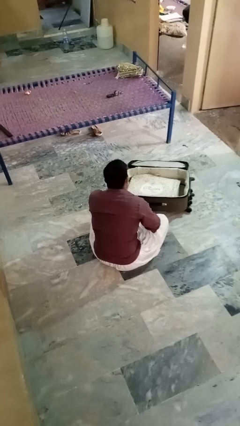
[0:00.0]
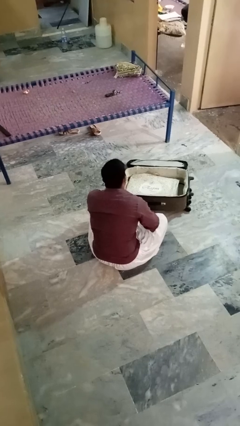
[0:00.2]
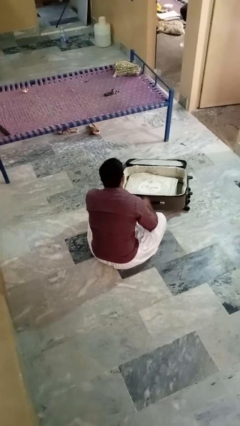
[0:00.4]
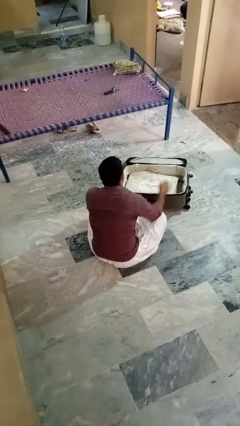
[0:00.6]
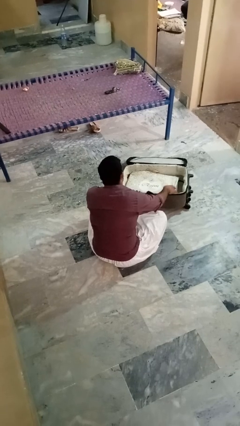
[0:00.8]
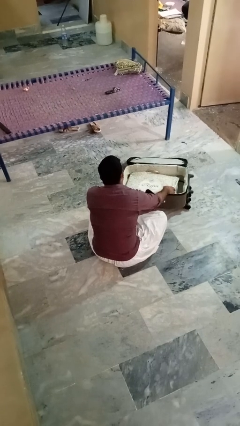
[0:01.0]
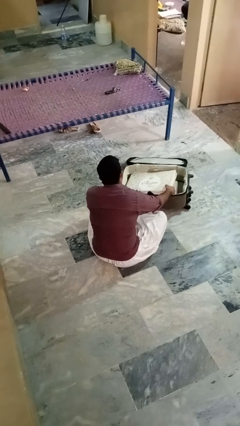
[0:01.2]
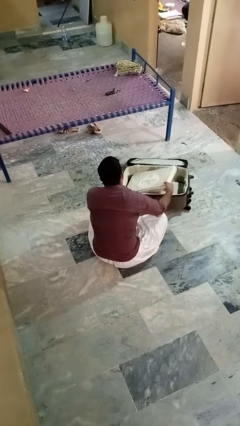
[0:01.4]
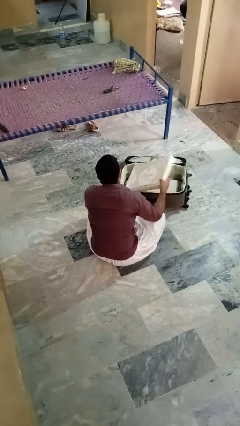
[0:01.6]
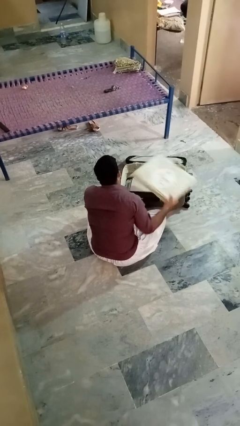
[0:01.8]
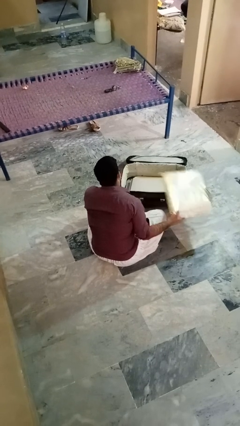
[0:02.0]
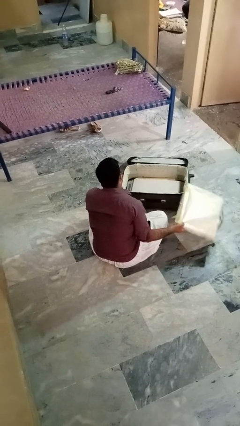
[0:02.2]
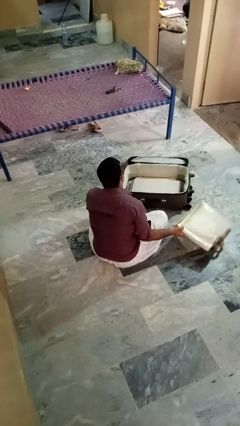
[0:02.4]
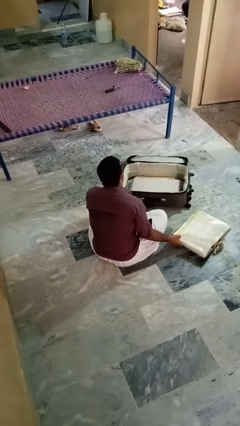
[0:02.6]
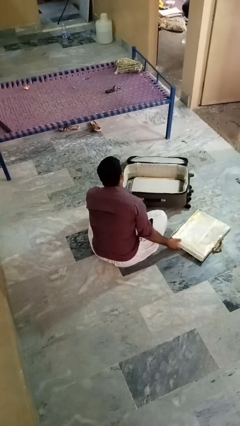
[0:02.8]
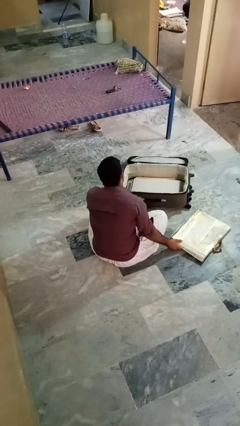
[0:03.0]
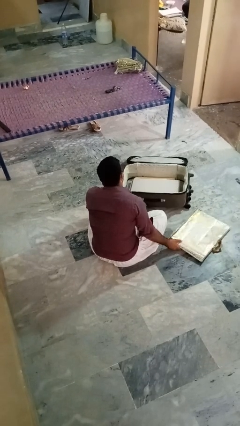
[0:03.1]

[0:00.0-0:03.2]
person takes object from bag

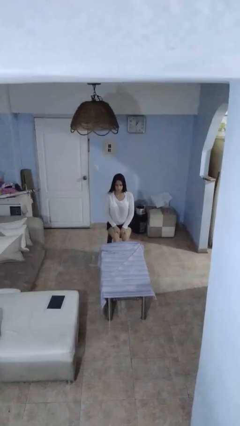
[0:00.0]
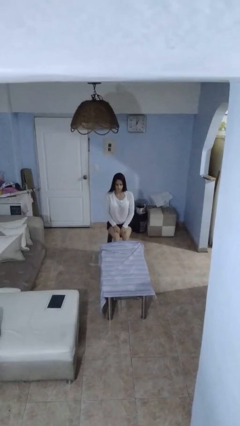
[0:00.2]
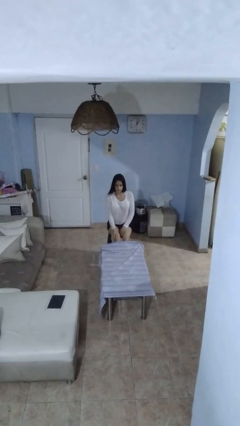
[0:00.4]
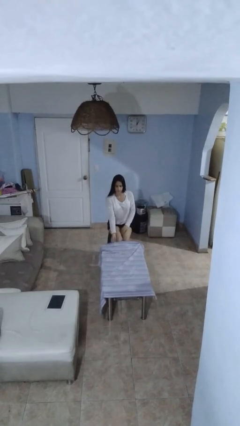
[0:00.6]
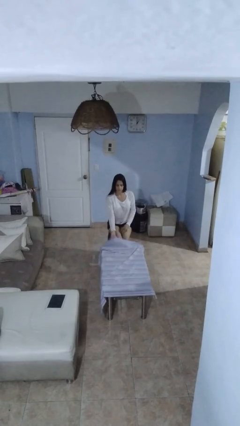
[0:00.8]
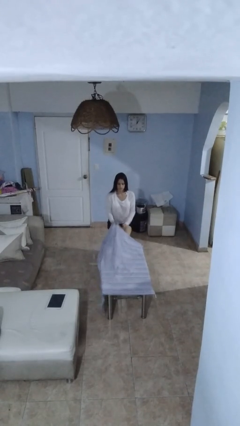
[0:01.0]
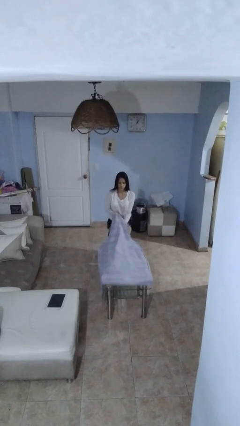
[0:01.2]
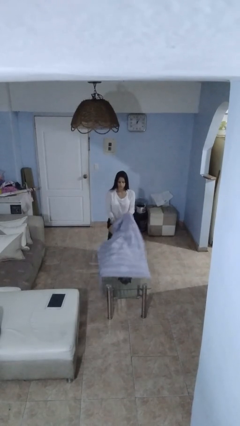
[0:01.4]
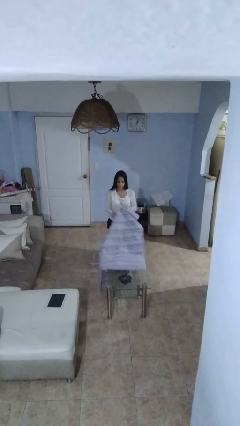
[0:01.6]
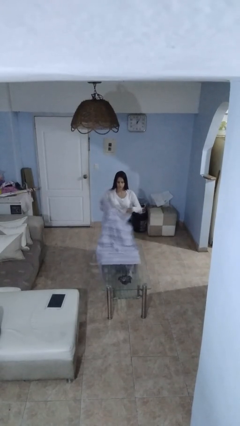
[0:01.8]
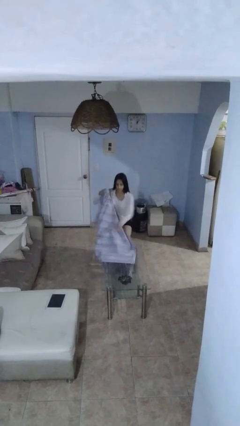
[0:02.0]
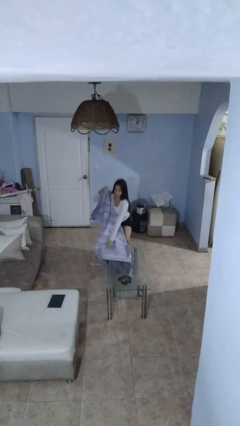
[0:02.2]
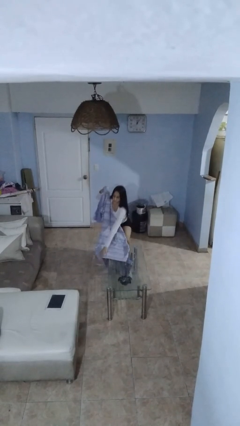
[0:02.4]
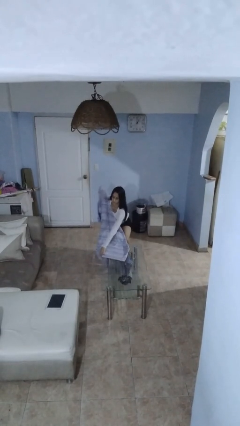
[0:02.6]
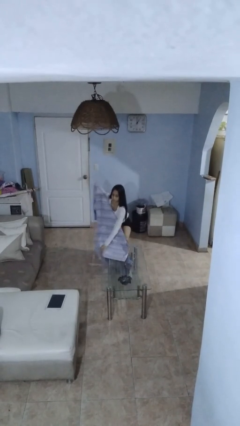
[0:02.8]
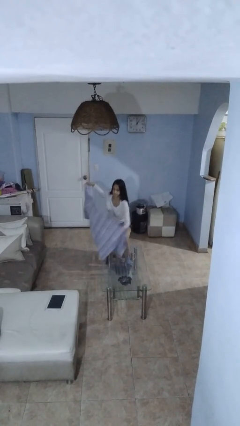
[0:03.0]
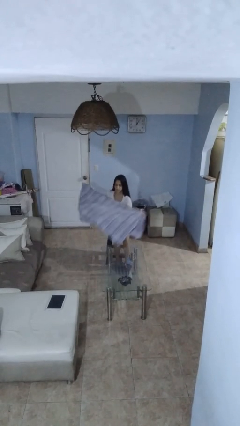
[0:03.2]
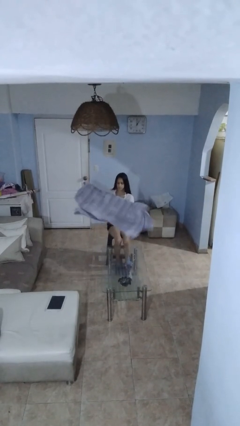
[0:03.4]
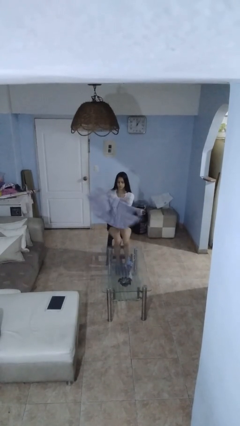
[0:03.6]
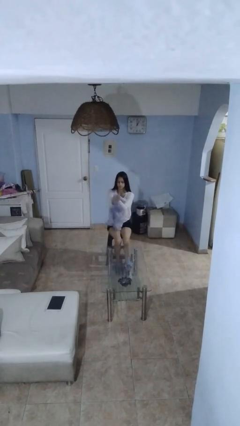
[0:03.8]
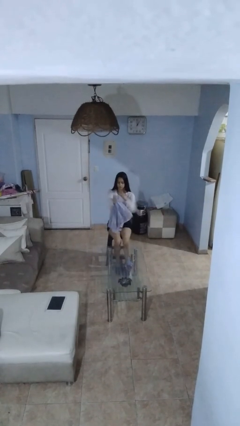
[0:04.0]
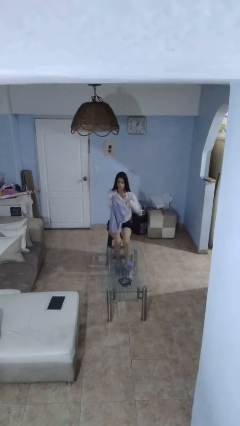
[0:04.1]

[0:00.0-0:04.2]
person folds tablecloth

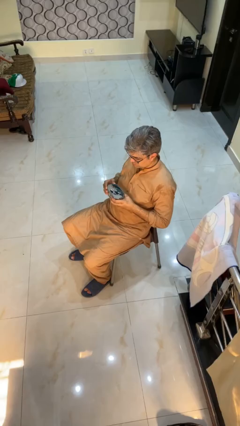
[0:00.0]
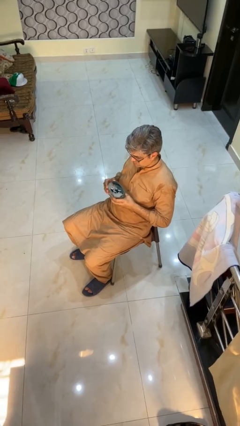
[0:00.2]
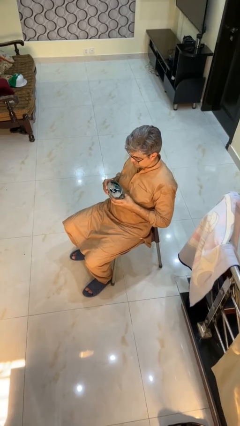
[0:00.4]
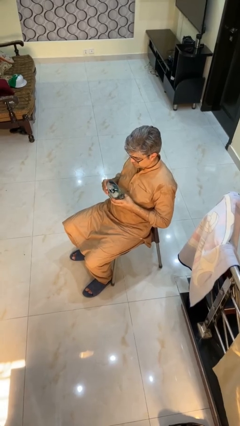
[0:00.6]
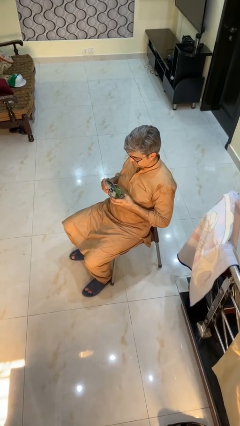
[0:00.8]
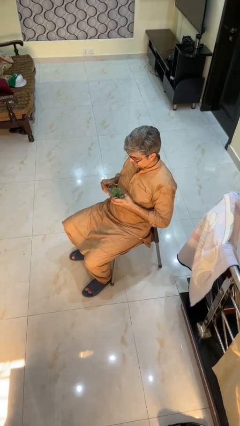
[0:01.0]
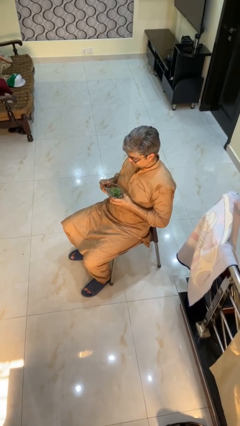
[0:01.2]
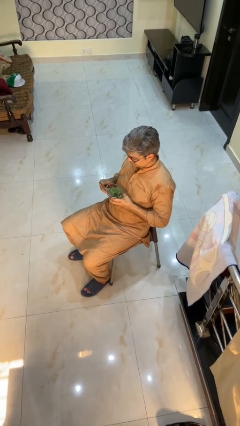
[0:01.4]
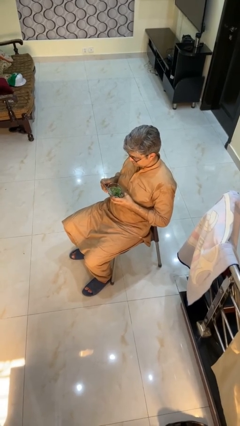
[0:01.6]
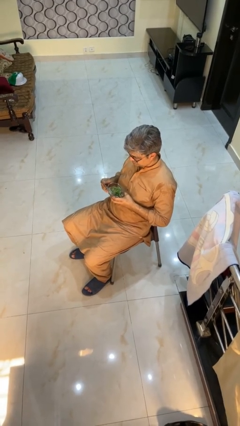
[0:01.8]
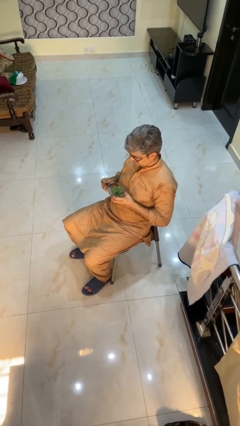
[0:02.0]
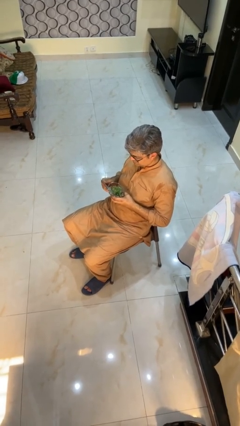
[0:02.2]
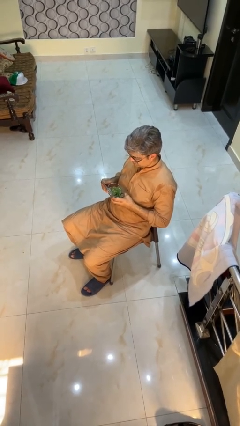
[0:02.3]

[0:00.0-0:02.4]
person opens jewelry box

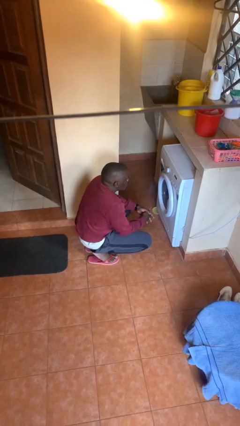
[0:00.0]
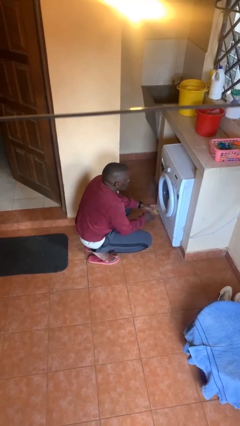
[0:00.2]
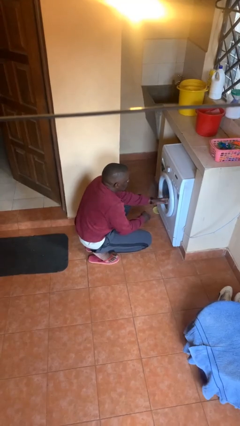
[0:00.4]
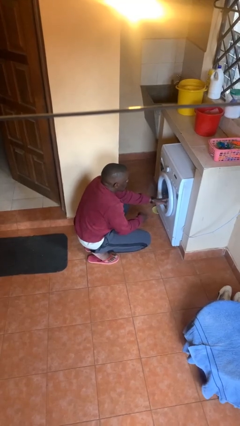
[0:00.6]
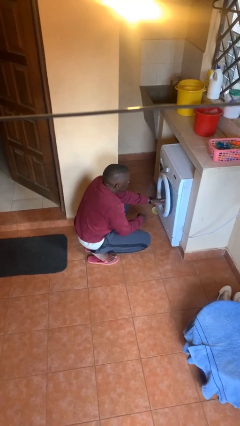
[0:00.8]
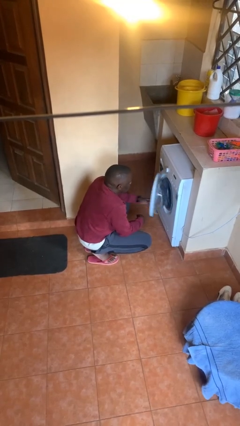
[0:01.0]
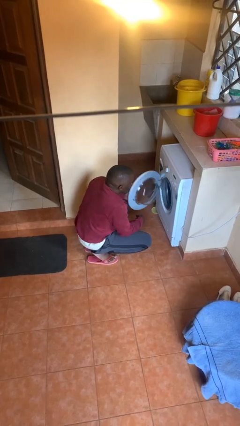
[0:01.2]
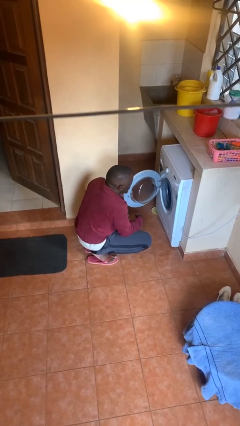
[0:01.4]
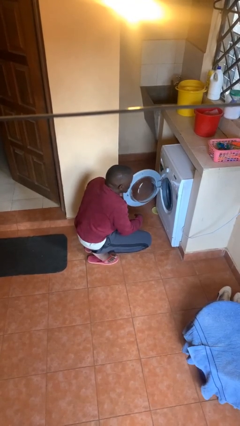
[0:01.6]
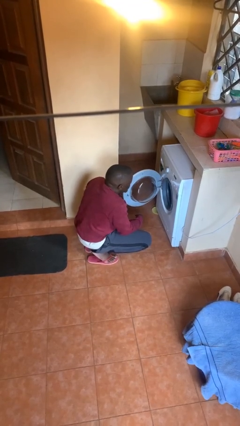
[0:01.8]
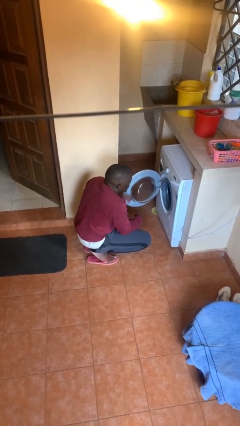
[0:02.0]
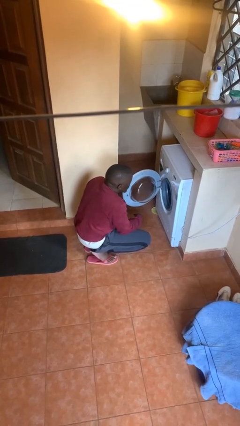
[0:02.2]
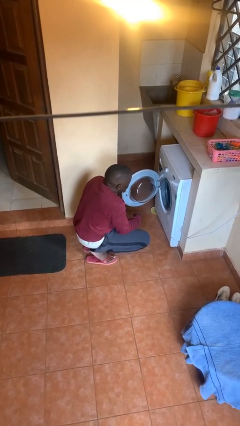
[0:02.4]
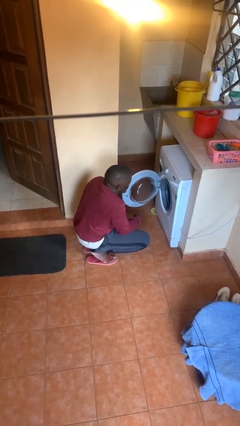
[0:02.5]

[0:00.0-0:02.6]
person opens clothes washer

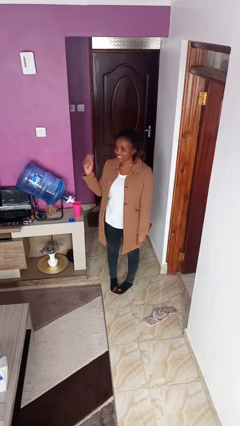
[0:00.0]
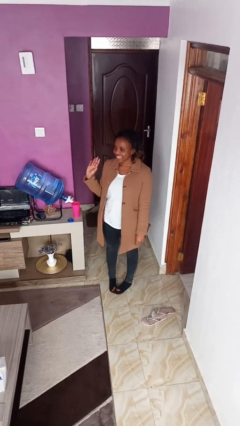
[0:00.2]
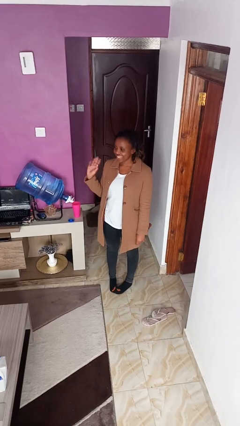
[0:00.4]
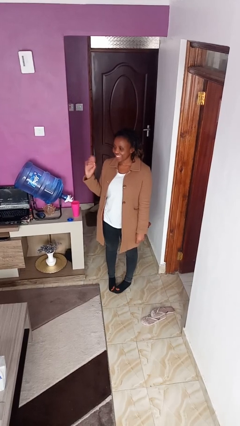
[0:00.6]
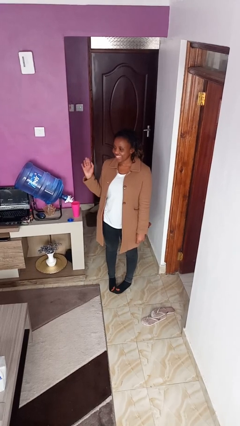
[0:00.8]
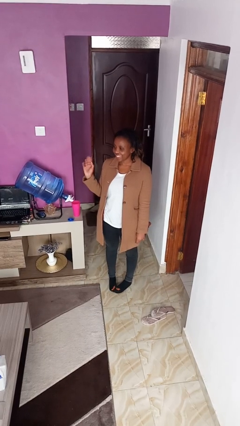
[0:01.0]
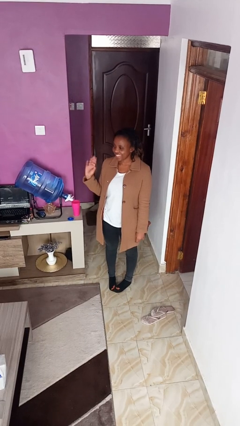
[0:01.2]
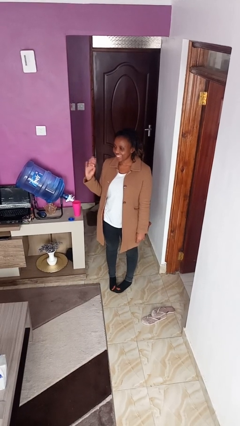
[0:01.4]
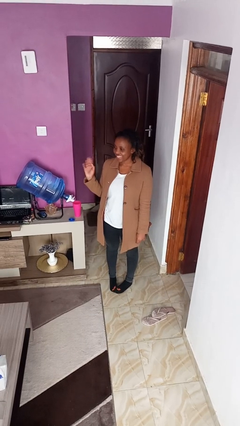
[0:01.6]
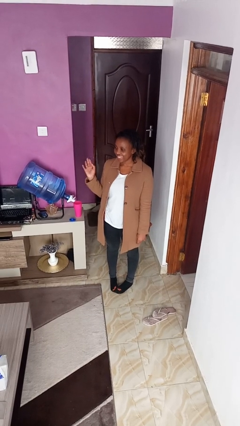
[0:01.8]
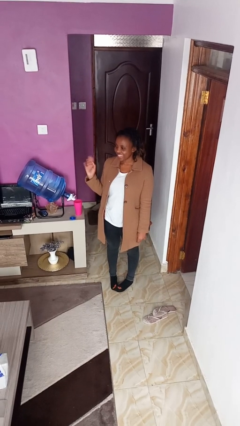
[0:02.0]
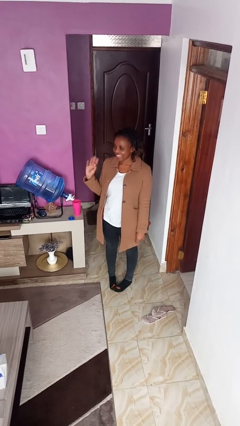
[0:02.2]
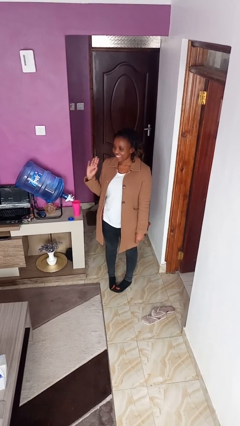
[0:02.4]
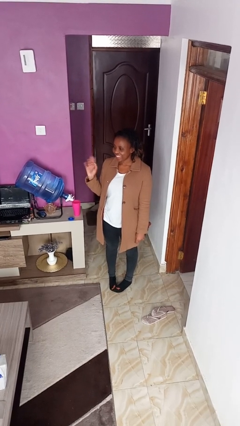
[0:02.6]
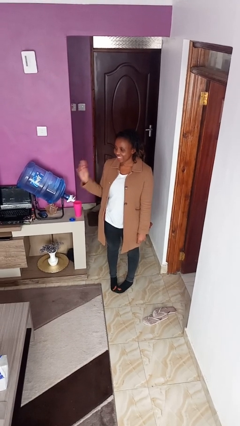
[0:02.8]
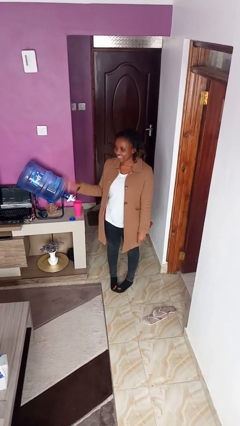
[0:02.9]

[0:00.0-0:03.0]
person waves at person

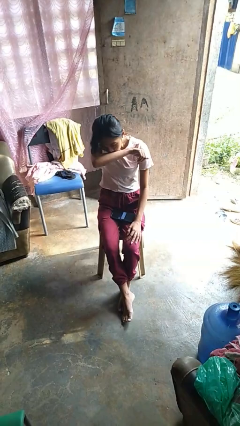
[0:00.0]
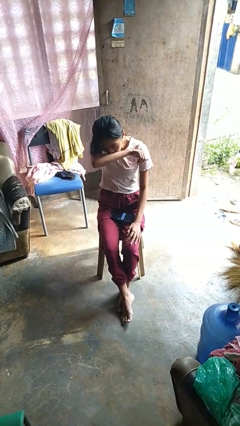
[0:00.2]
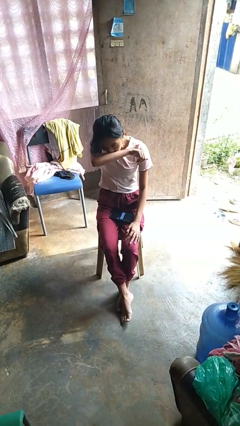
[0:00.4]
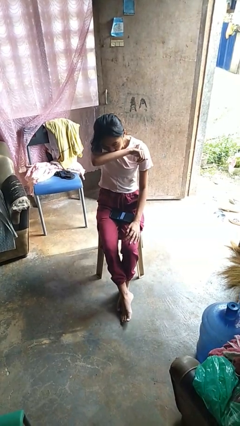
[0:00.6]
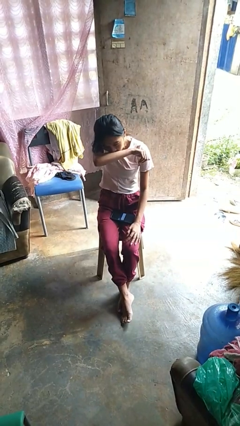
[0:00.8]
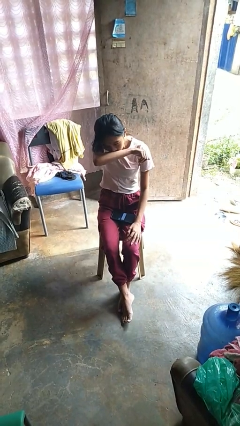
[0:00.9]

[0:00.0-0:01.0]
person sneezes into arm

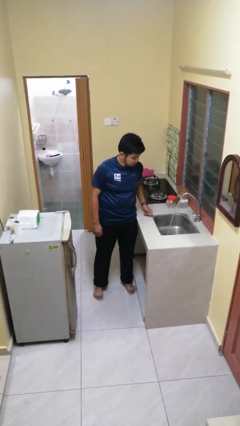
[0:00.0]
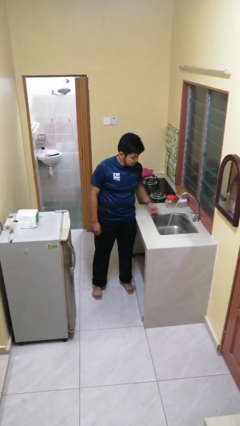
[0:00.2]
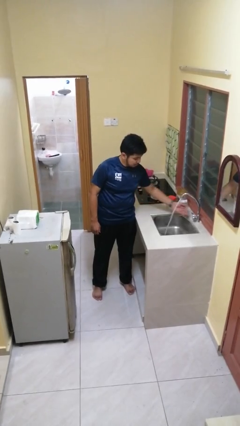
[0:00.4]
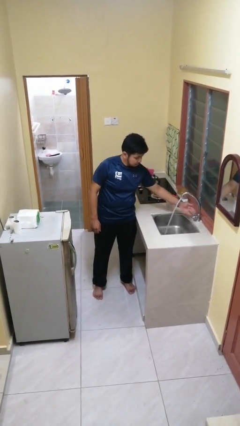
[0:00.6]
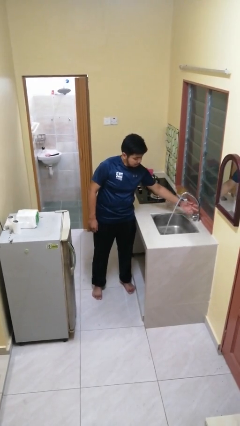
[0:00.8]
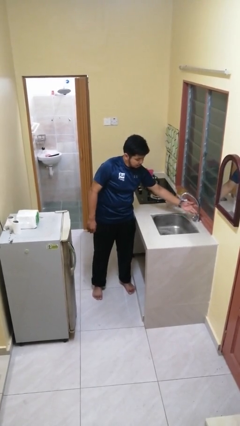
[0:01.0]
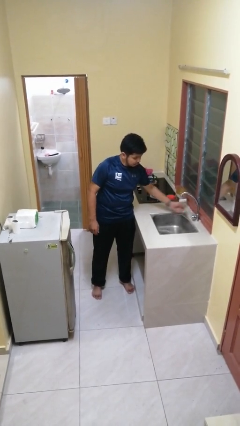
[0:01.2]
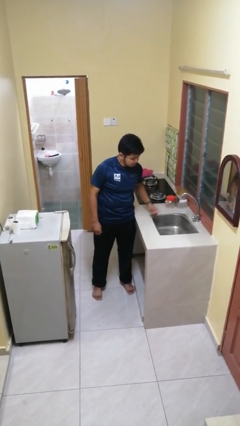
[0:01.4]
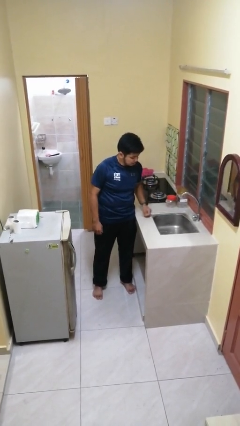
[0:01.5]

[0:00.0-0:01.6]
person turns off faucet
